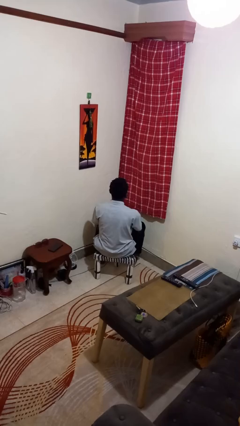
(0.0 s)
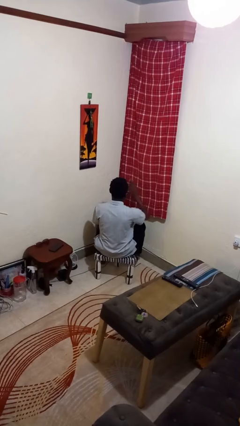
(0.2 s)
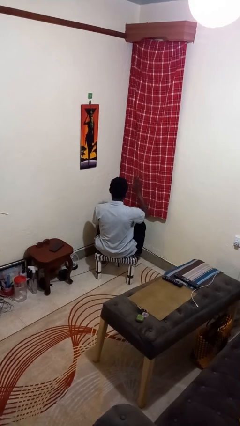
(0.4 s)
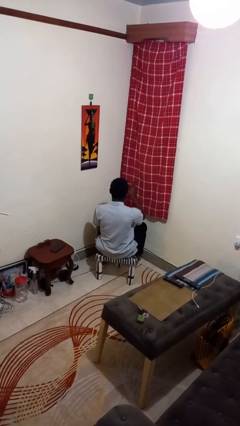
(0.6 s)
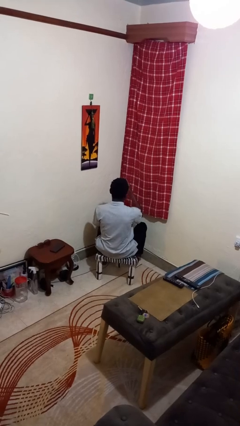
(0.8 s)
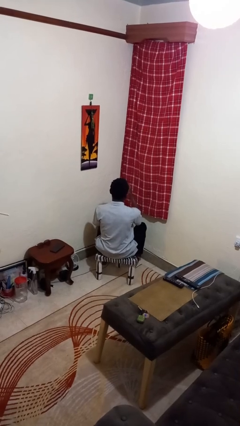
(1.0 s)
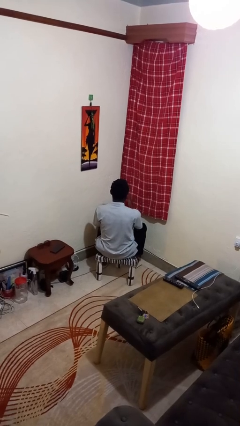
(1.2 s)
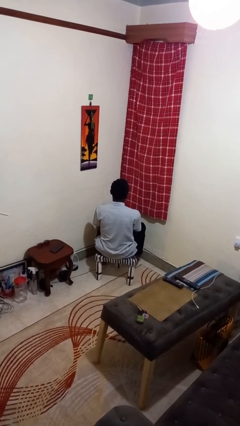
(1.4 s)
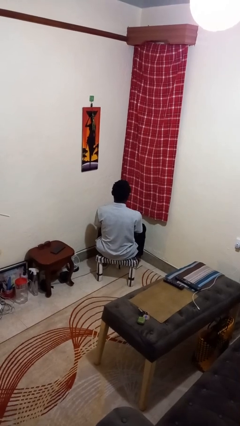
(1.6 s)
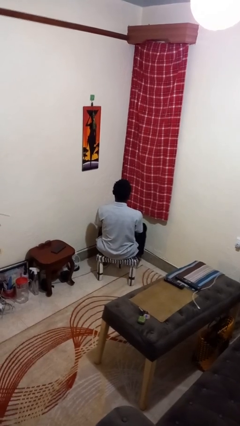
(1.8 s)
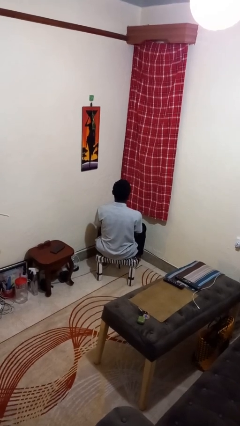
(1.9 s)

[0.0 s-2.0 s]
person gestures swipe left

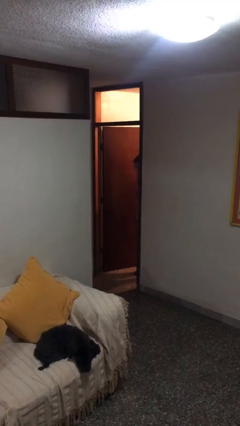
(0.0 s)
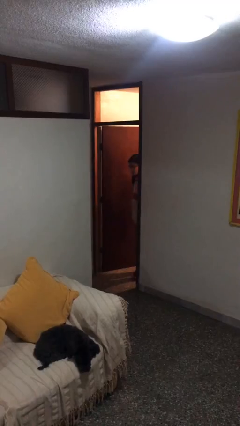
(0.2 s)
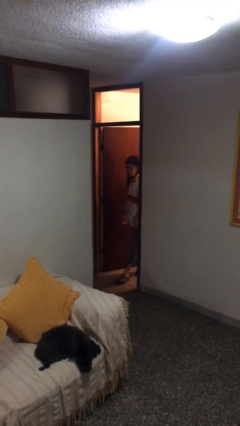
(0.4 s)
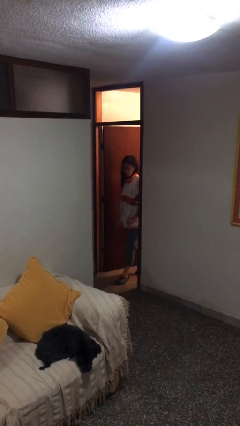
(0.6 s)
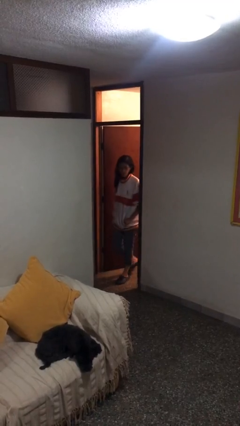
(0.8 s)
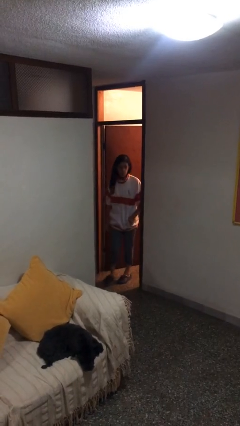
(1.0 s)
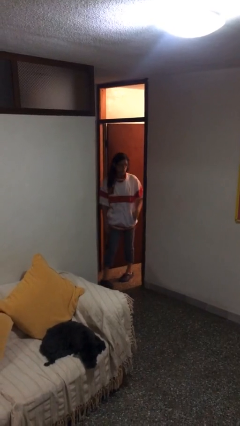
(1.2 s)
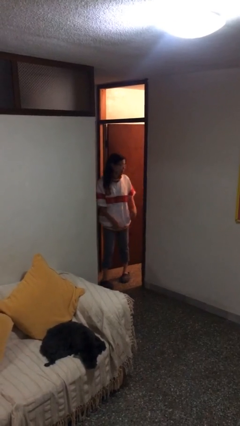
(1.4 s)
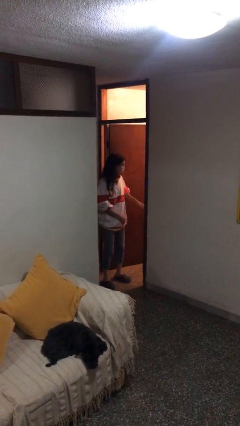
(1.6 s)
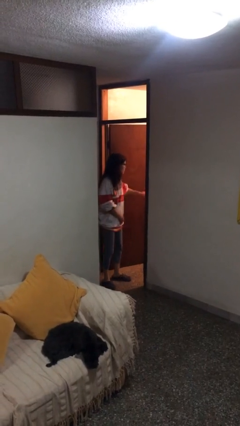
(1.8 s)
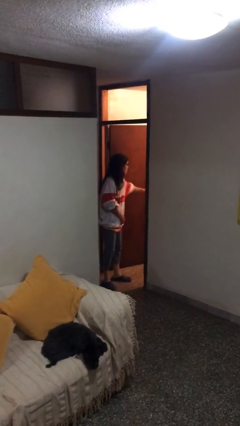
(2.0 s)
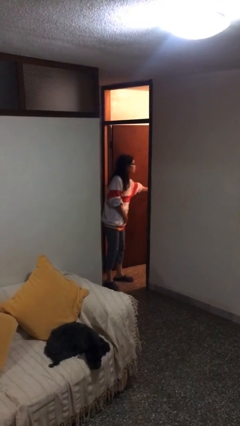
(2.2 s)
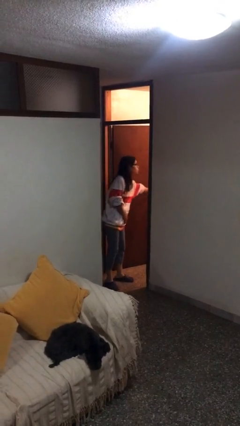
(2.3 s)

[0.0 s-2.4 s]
person enters scene through structure

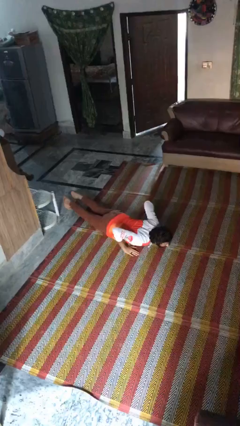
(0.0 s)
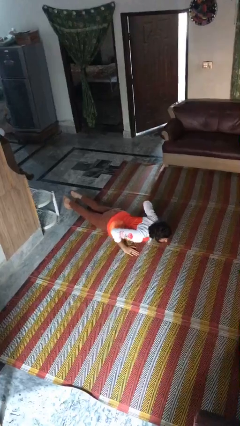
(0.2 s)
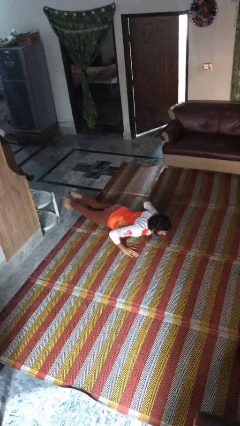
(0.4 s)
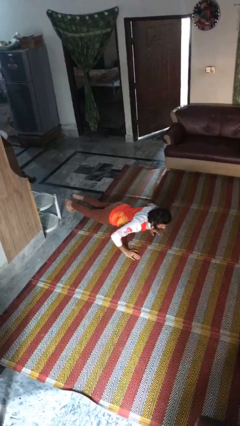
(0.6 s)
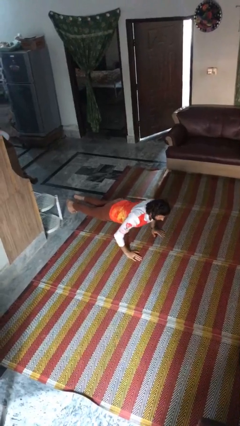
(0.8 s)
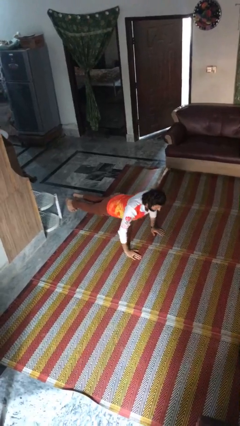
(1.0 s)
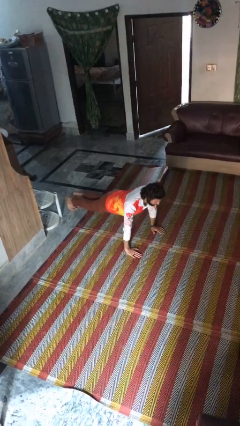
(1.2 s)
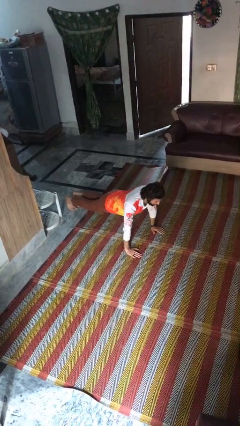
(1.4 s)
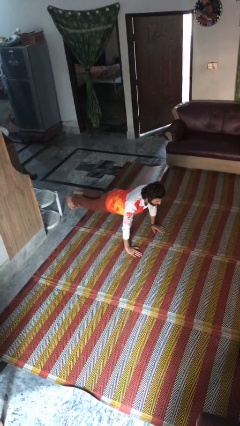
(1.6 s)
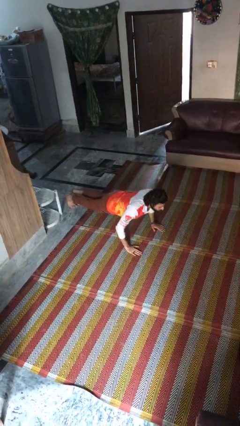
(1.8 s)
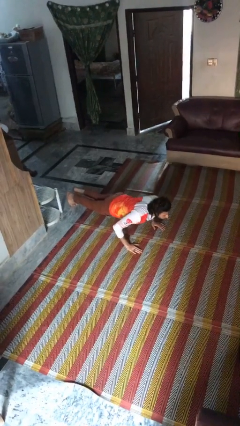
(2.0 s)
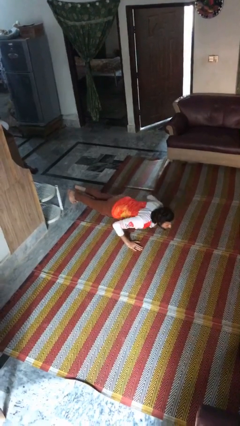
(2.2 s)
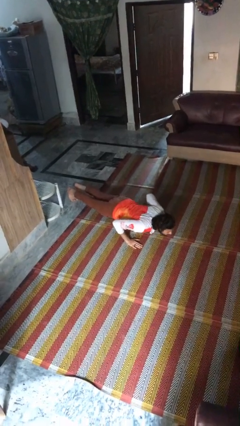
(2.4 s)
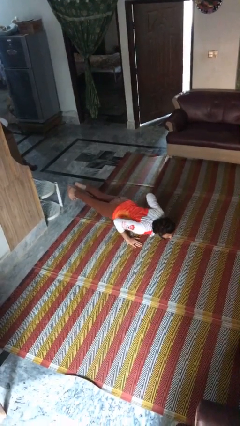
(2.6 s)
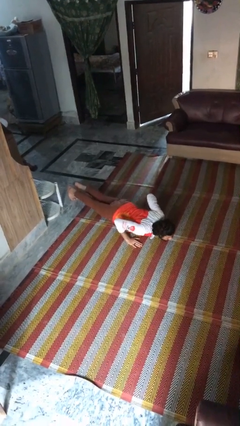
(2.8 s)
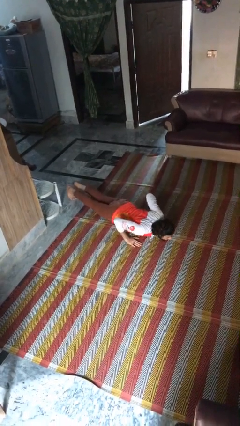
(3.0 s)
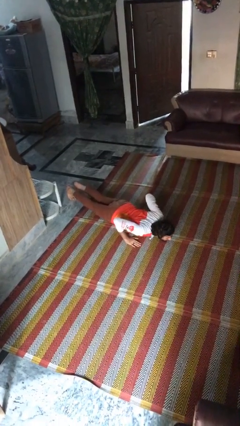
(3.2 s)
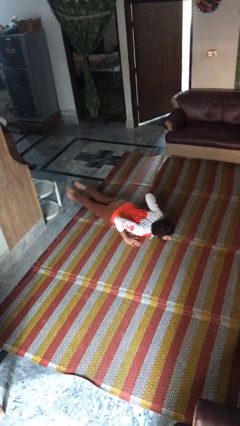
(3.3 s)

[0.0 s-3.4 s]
person exercises with pushup

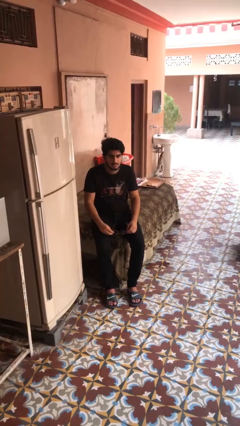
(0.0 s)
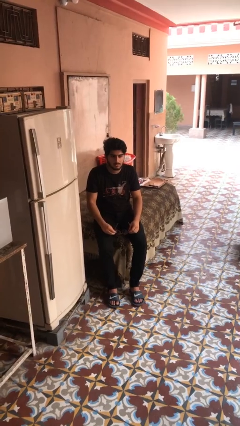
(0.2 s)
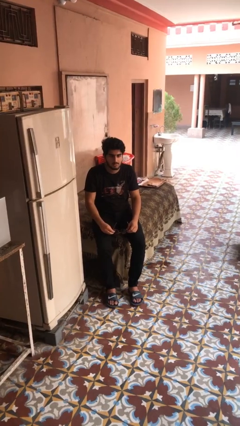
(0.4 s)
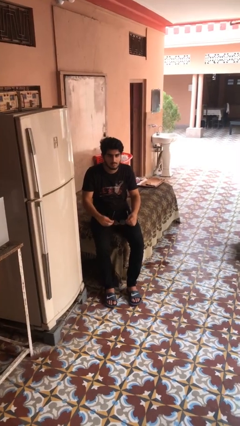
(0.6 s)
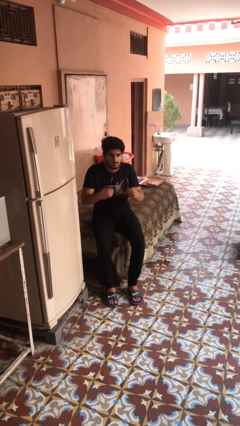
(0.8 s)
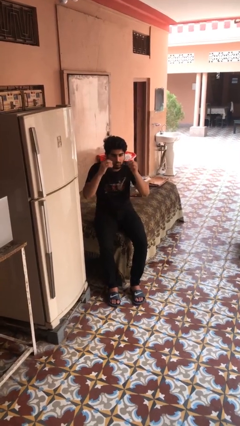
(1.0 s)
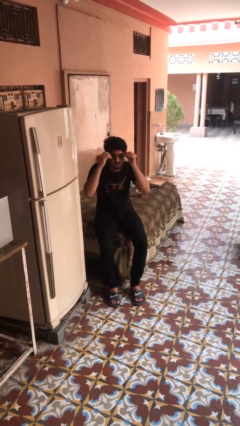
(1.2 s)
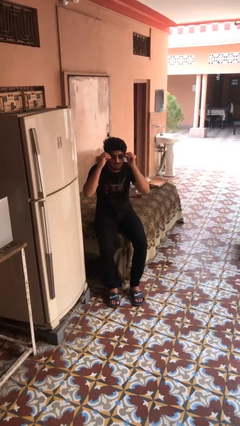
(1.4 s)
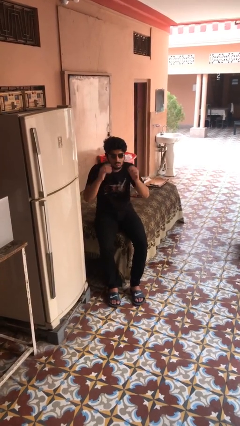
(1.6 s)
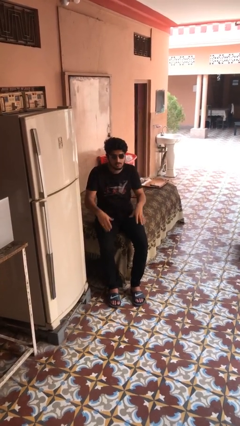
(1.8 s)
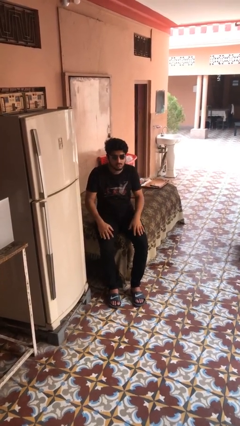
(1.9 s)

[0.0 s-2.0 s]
person puts on sunglasses

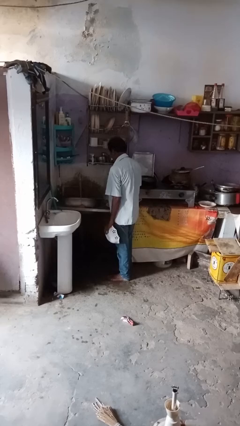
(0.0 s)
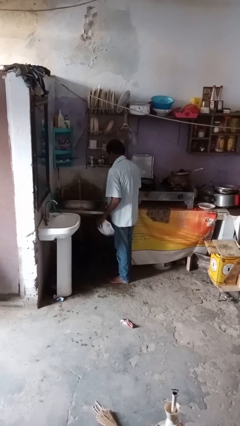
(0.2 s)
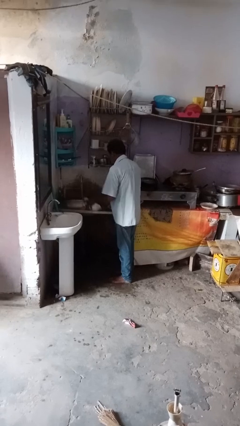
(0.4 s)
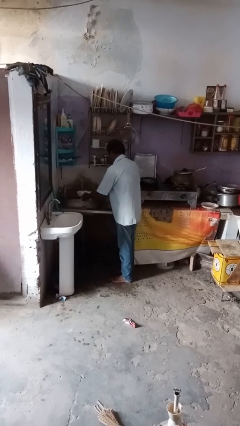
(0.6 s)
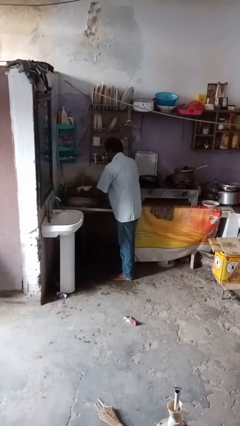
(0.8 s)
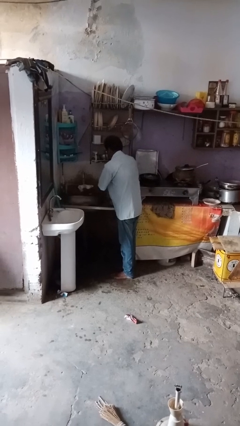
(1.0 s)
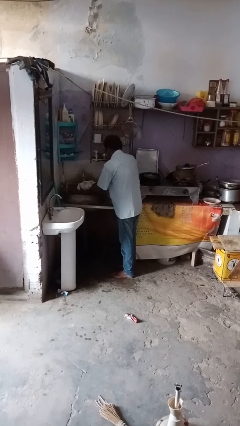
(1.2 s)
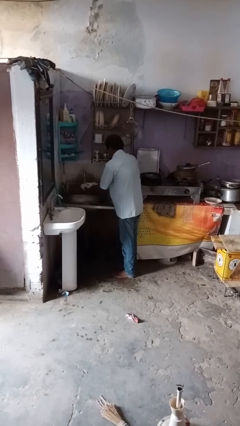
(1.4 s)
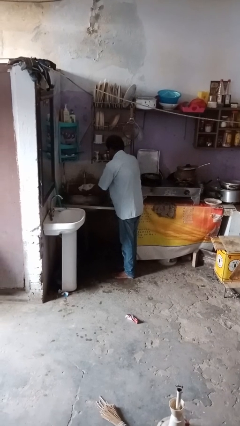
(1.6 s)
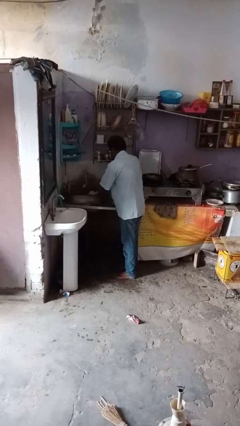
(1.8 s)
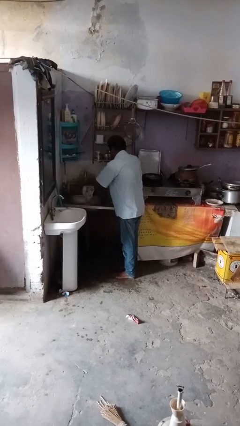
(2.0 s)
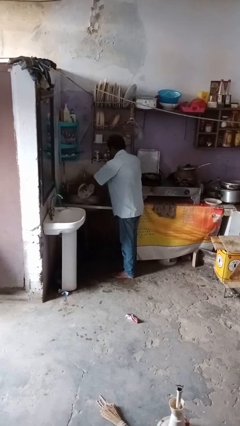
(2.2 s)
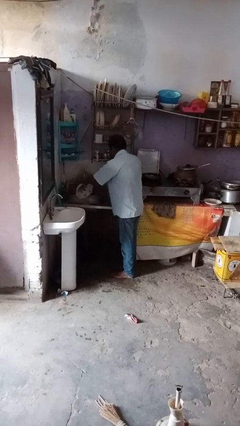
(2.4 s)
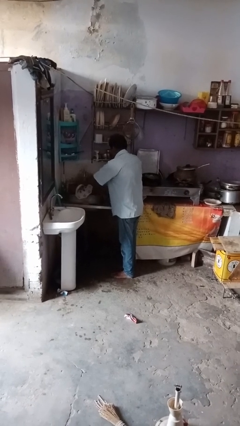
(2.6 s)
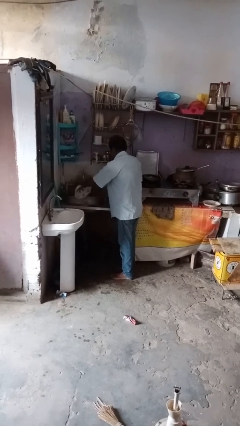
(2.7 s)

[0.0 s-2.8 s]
person washes dish

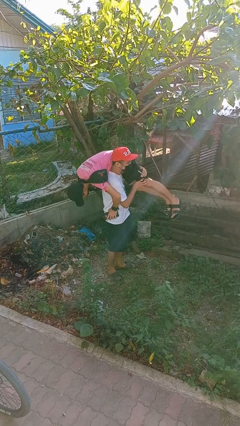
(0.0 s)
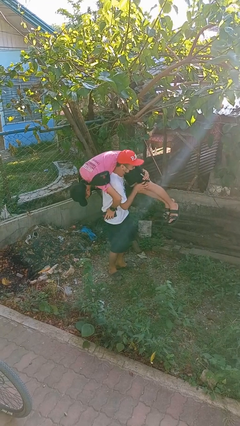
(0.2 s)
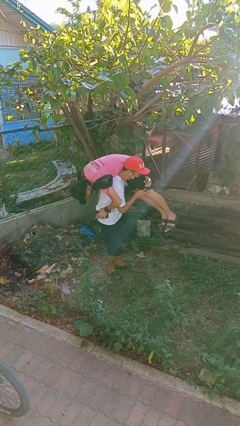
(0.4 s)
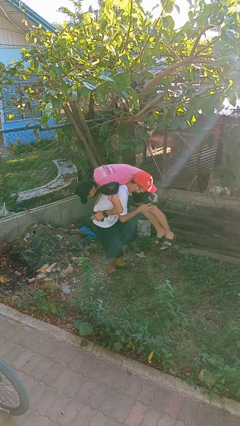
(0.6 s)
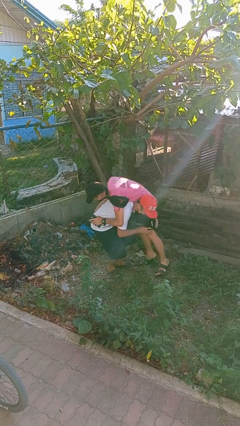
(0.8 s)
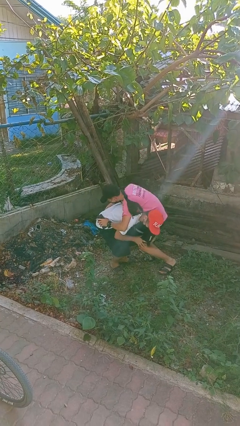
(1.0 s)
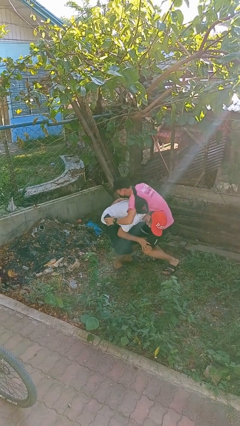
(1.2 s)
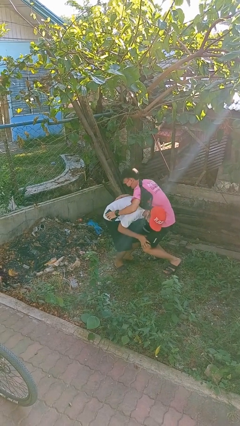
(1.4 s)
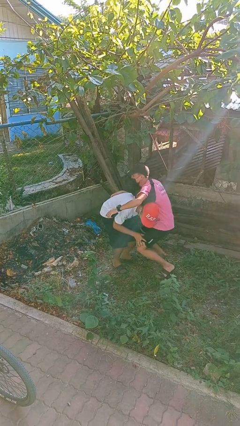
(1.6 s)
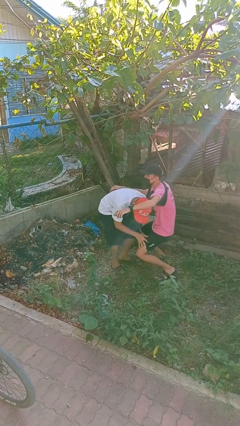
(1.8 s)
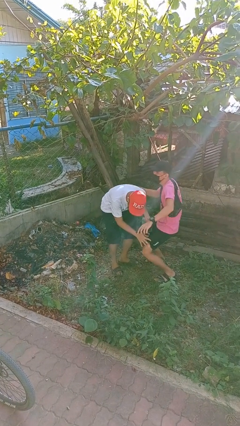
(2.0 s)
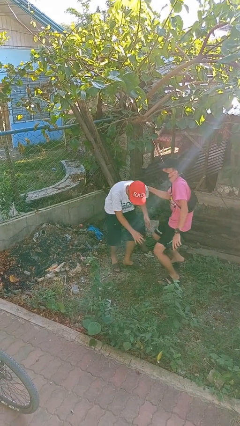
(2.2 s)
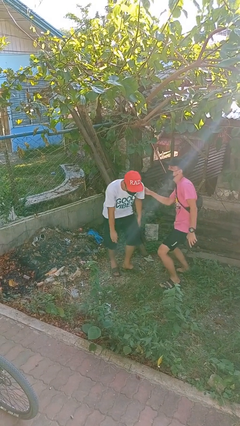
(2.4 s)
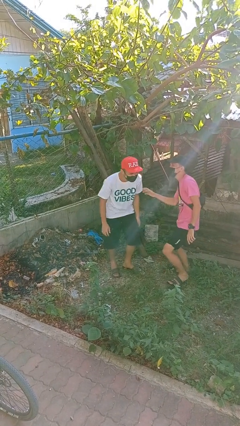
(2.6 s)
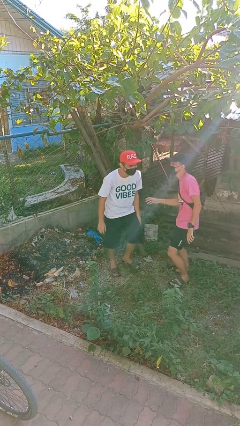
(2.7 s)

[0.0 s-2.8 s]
person puts down person

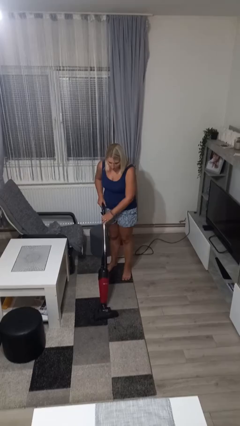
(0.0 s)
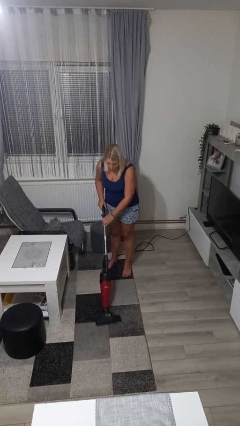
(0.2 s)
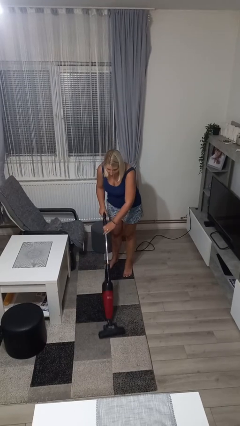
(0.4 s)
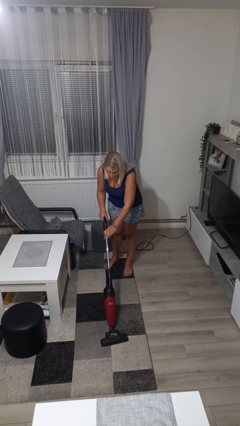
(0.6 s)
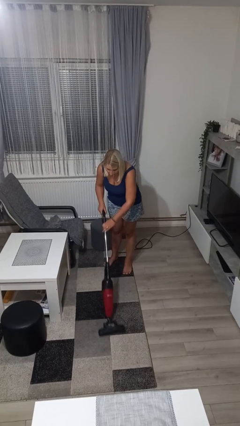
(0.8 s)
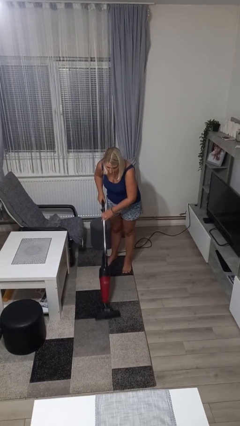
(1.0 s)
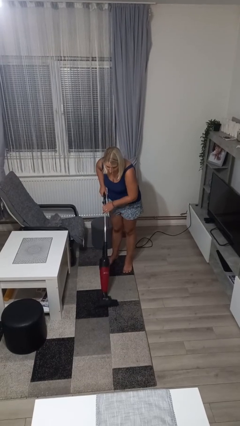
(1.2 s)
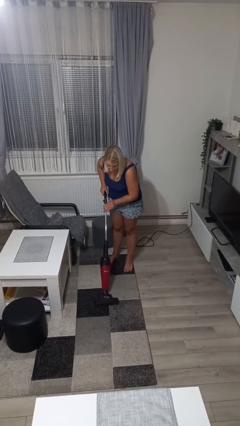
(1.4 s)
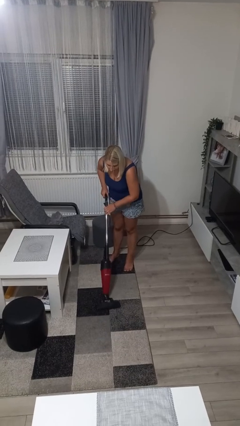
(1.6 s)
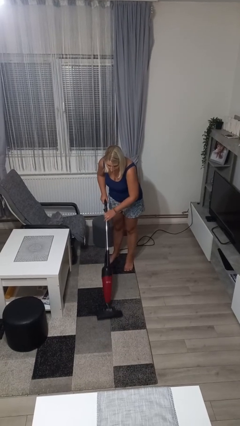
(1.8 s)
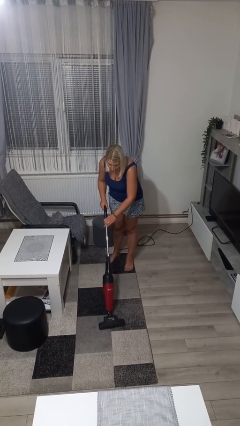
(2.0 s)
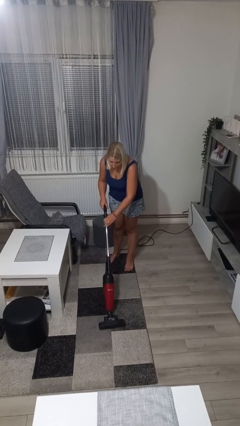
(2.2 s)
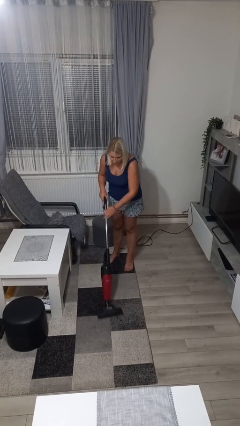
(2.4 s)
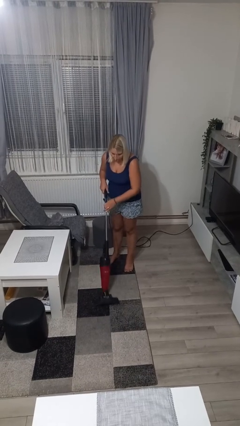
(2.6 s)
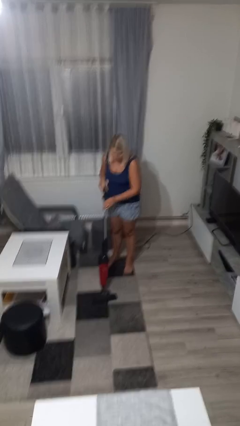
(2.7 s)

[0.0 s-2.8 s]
person vacuums carpet
